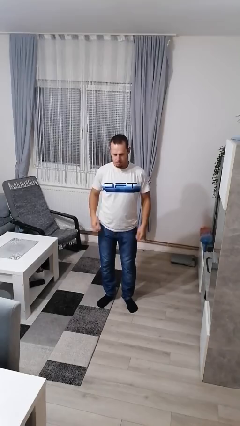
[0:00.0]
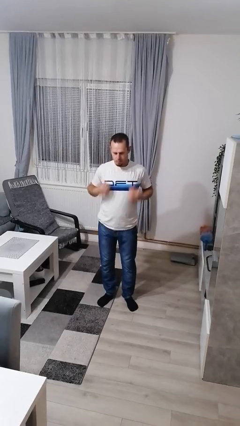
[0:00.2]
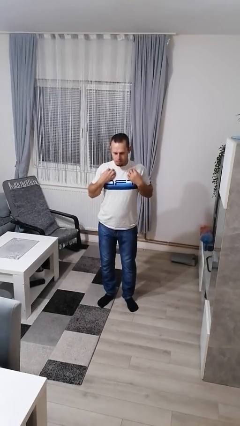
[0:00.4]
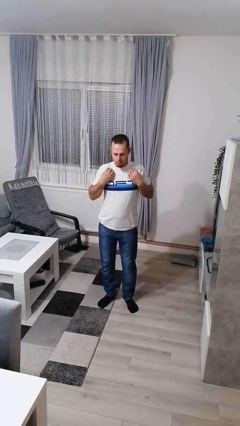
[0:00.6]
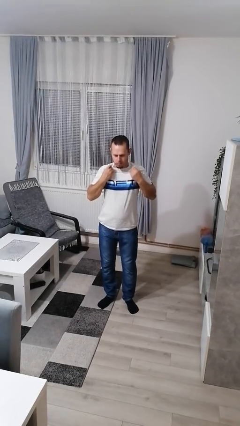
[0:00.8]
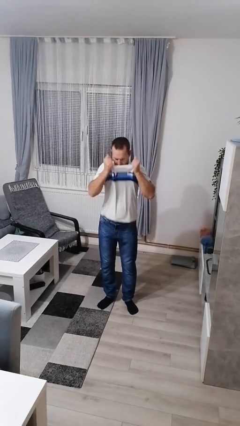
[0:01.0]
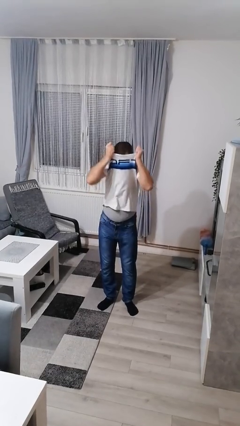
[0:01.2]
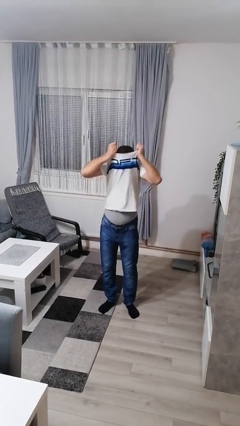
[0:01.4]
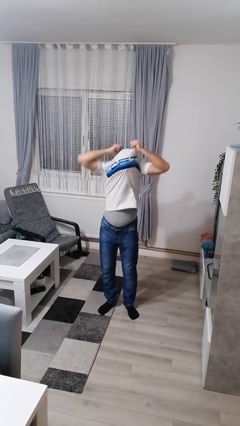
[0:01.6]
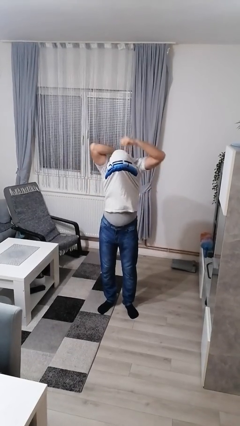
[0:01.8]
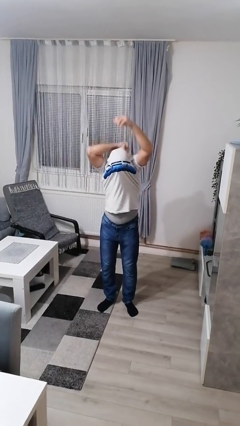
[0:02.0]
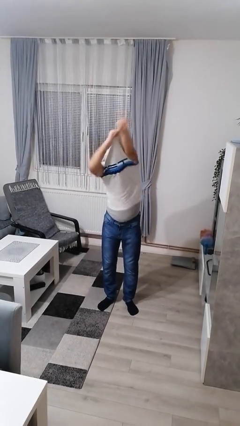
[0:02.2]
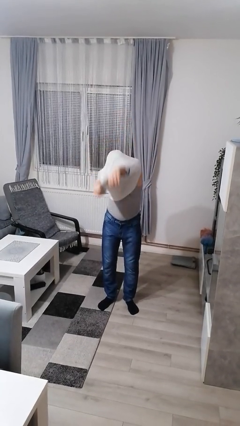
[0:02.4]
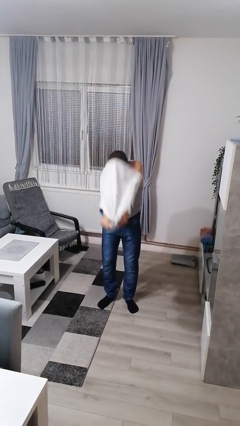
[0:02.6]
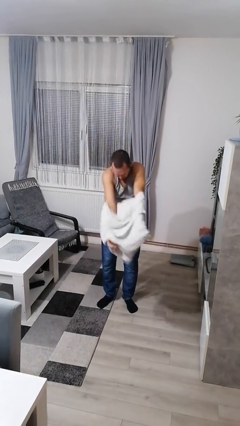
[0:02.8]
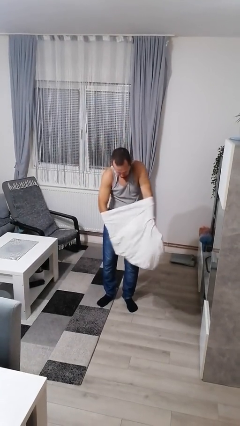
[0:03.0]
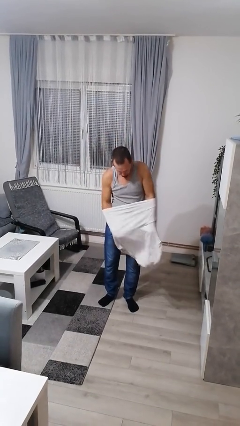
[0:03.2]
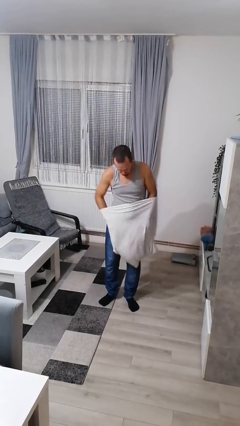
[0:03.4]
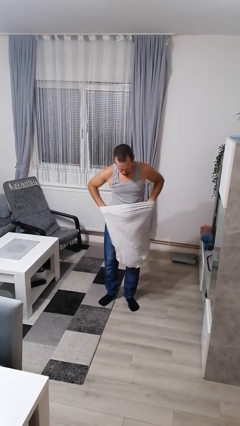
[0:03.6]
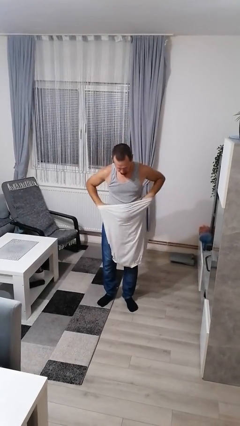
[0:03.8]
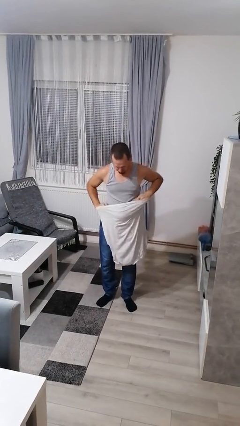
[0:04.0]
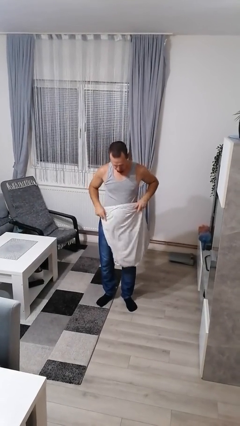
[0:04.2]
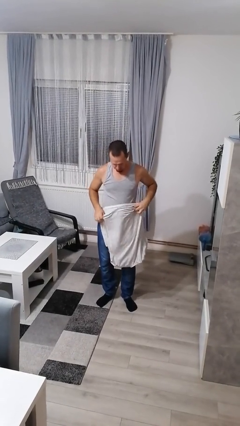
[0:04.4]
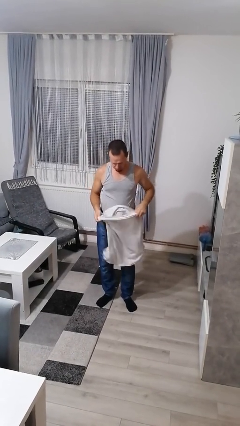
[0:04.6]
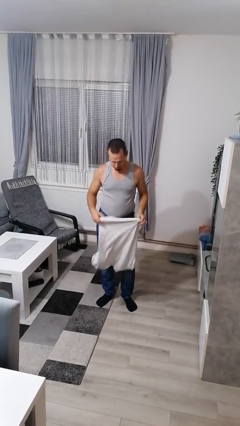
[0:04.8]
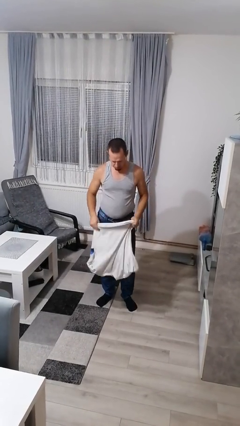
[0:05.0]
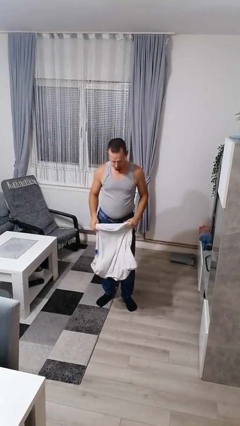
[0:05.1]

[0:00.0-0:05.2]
person takes off shirt

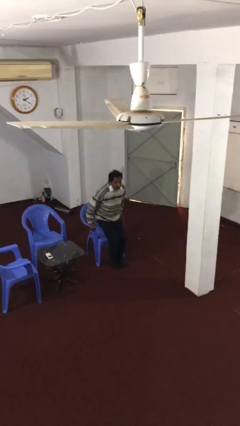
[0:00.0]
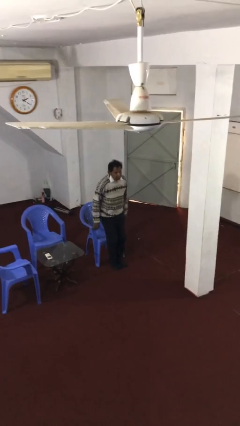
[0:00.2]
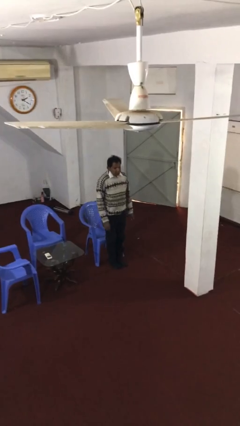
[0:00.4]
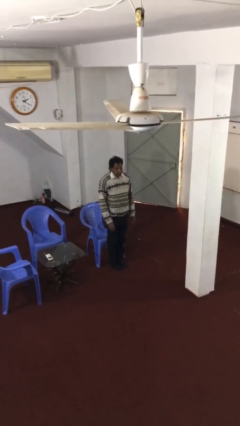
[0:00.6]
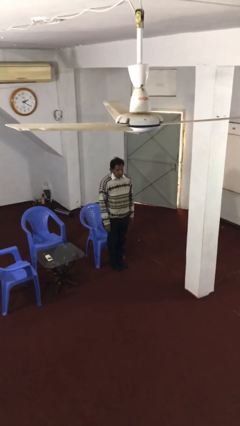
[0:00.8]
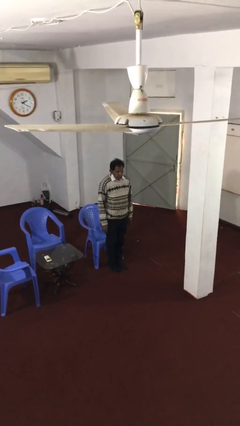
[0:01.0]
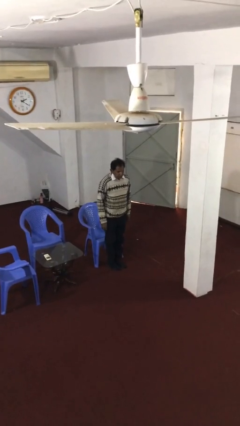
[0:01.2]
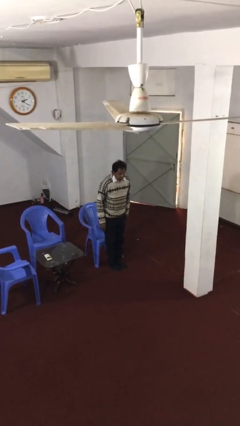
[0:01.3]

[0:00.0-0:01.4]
person stands up

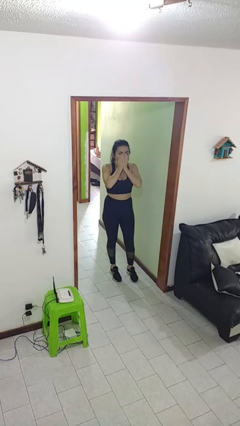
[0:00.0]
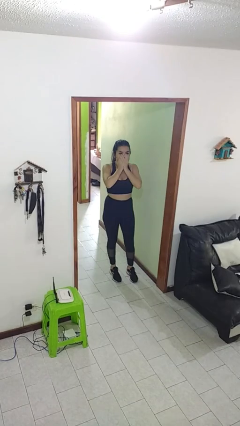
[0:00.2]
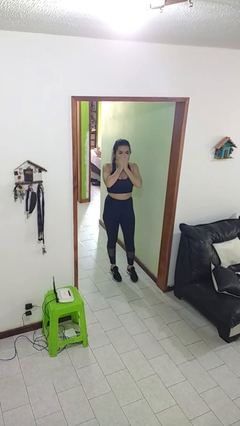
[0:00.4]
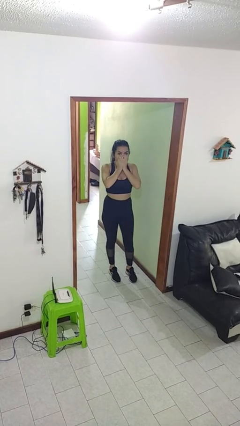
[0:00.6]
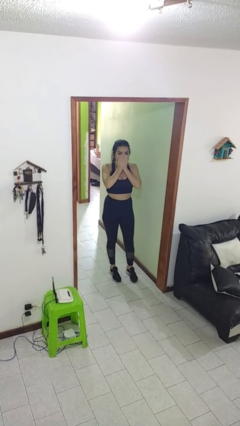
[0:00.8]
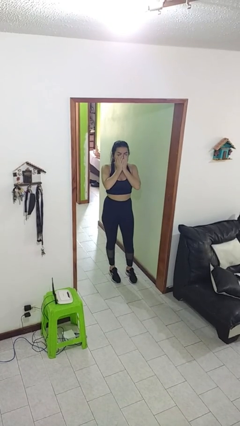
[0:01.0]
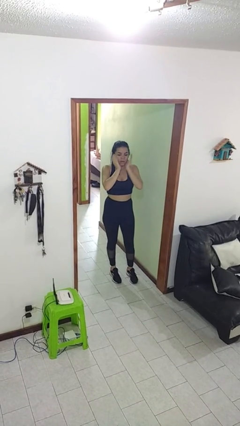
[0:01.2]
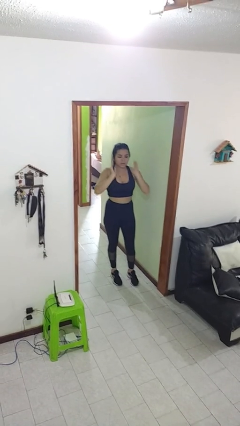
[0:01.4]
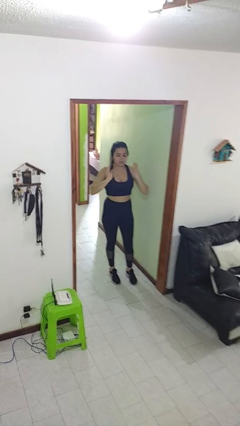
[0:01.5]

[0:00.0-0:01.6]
person covers face with hands

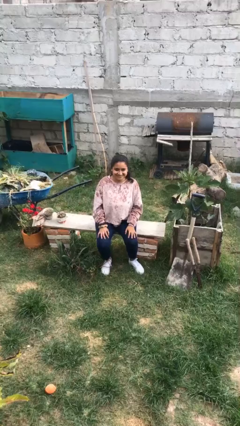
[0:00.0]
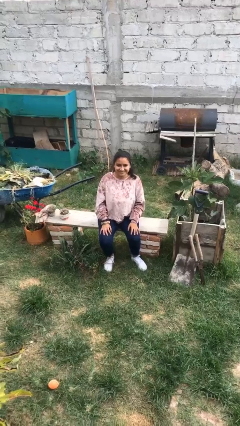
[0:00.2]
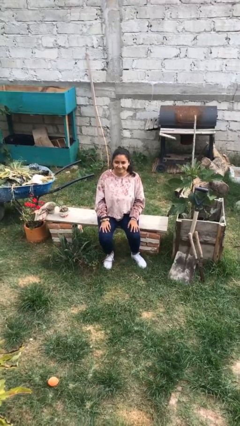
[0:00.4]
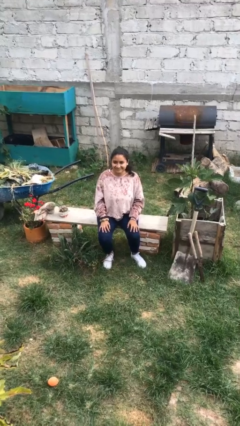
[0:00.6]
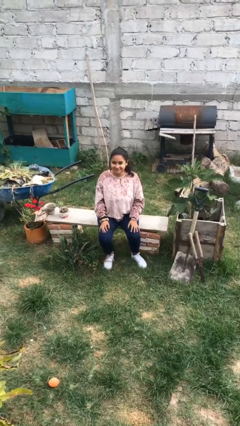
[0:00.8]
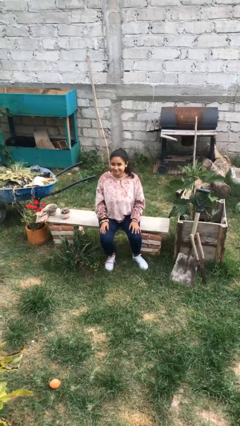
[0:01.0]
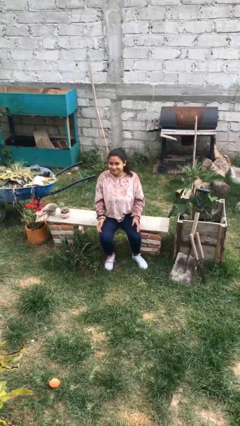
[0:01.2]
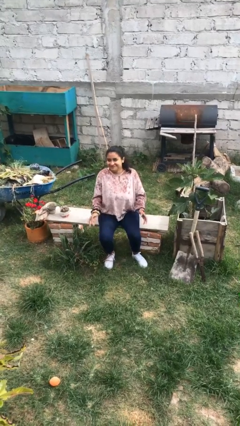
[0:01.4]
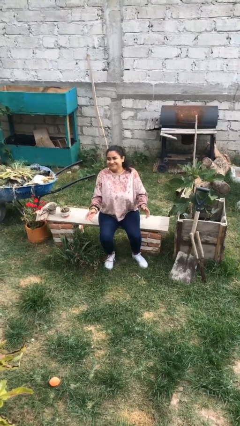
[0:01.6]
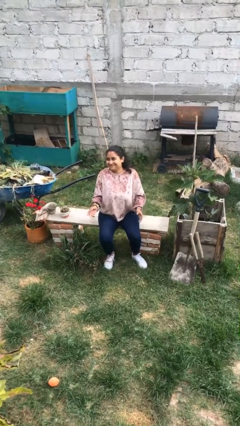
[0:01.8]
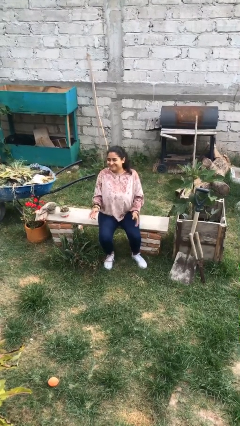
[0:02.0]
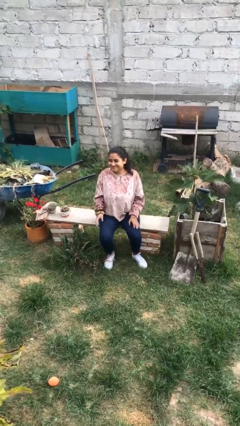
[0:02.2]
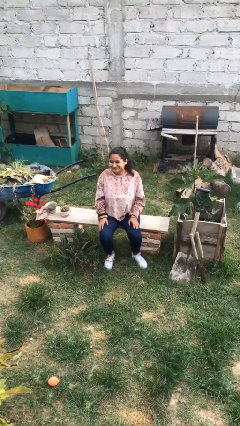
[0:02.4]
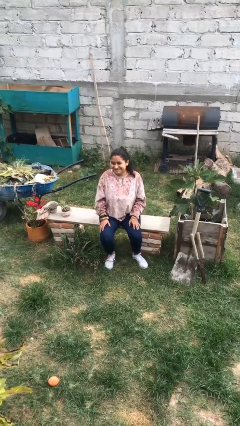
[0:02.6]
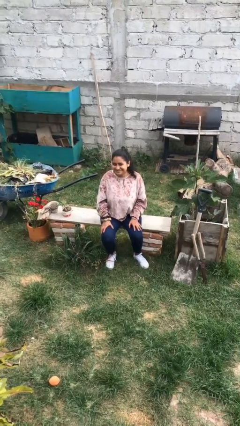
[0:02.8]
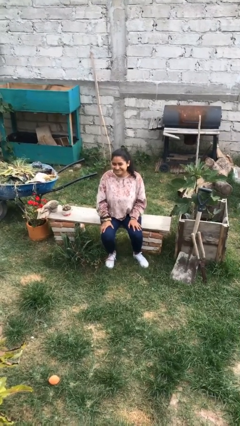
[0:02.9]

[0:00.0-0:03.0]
person shrugs

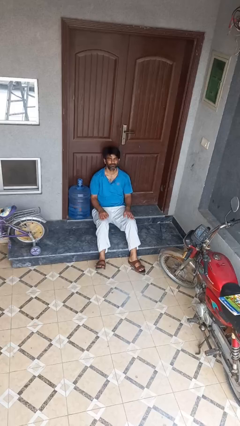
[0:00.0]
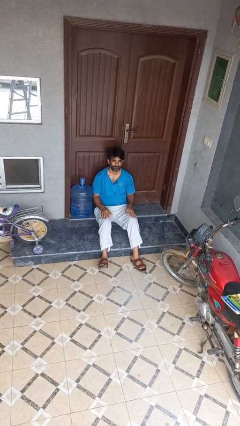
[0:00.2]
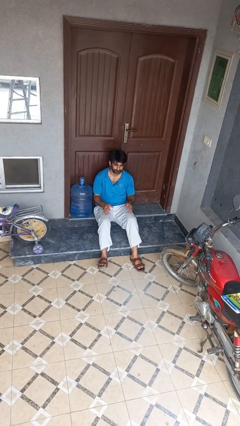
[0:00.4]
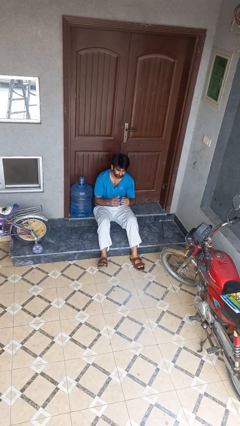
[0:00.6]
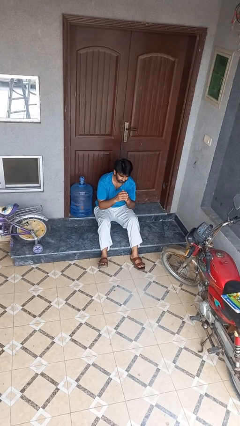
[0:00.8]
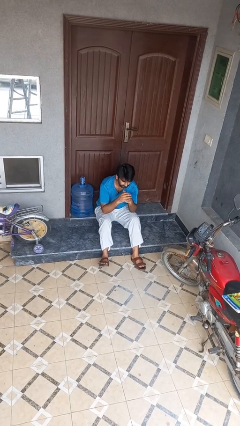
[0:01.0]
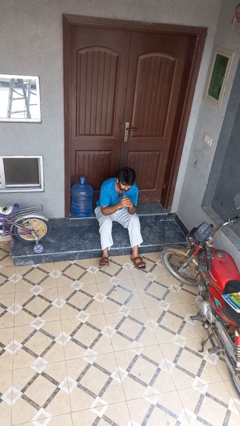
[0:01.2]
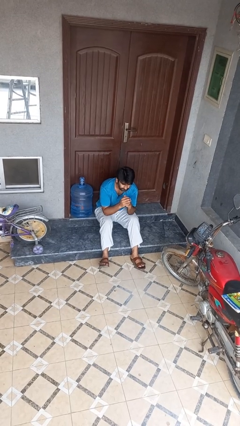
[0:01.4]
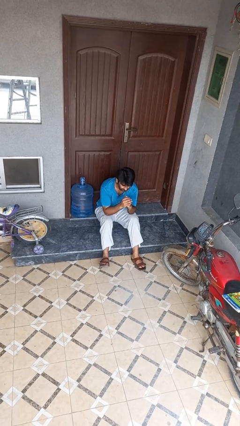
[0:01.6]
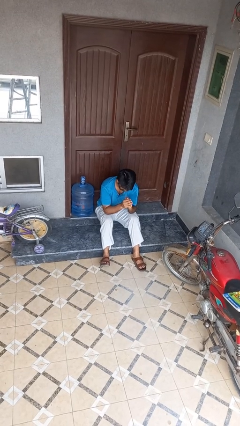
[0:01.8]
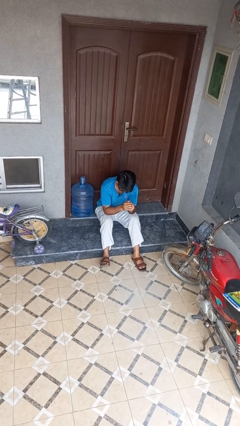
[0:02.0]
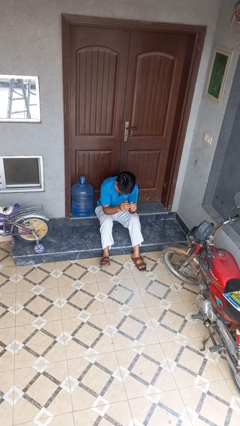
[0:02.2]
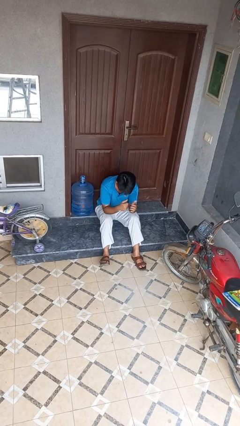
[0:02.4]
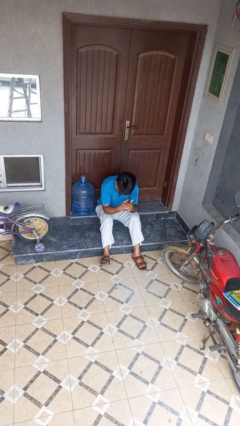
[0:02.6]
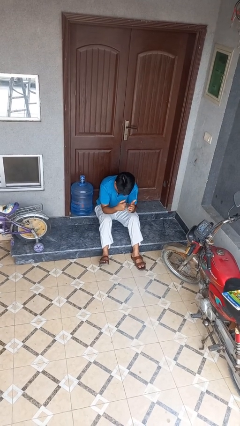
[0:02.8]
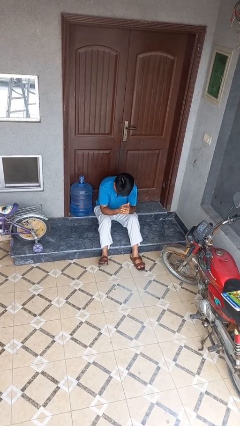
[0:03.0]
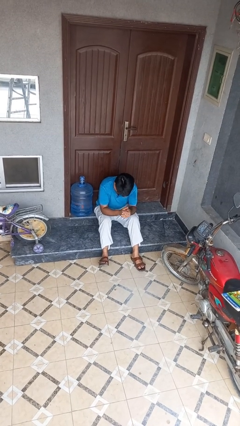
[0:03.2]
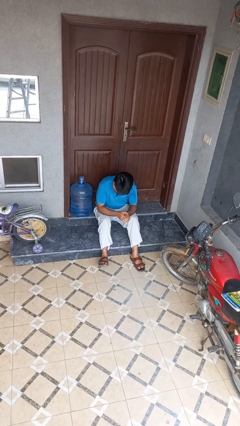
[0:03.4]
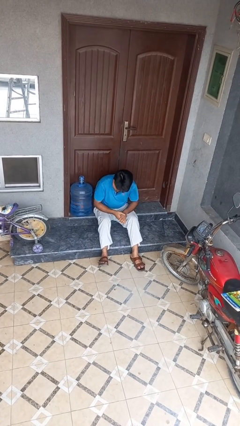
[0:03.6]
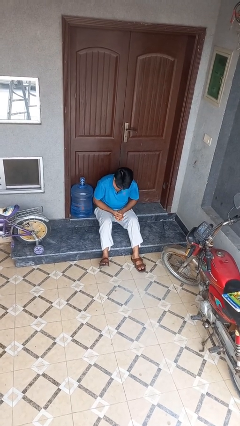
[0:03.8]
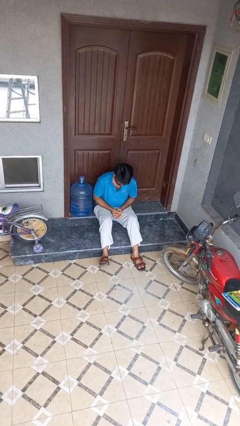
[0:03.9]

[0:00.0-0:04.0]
person looks at hands in lap

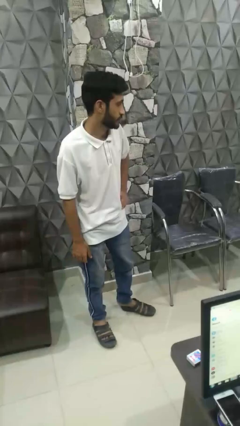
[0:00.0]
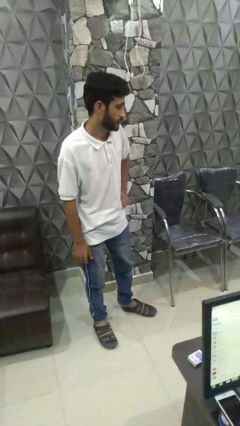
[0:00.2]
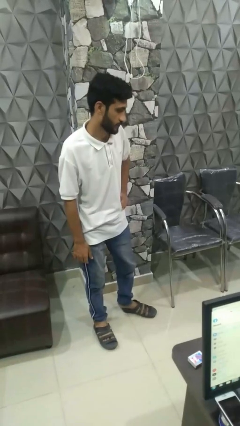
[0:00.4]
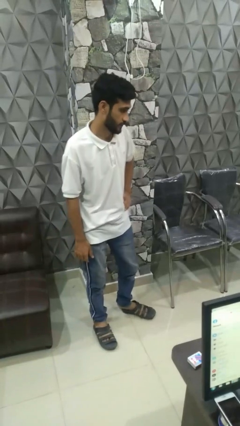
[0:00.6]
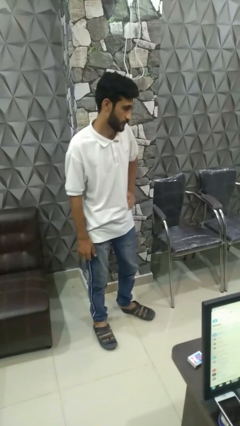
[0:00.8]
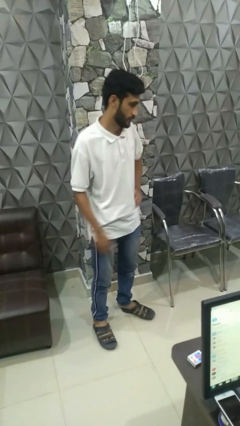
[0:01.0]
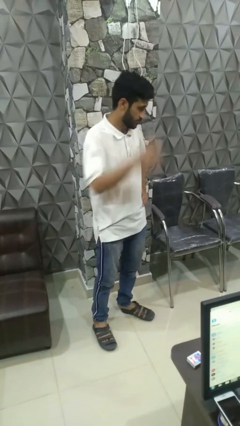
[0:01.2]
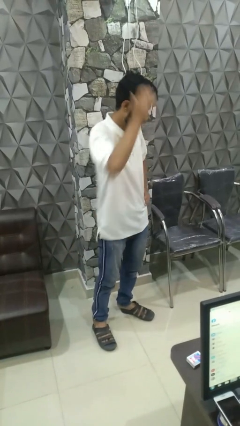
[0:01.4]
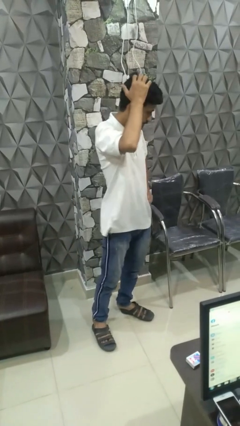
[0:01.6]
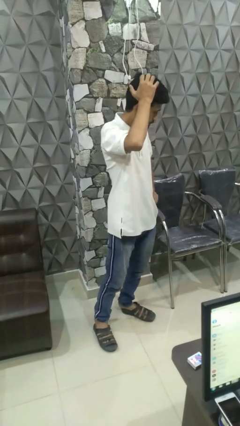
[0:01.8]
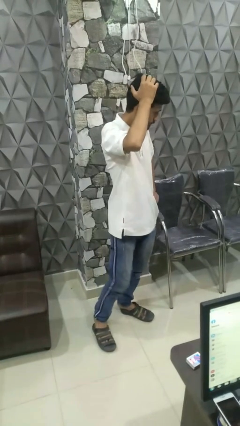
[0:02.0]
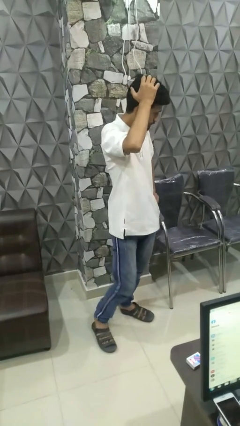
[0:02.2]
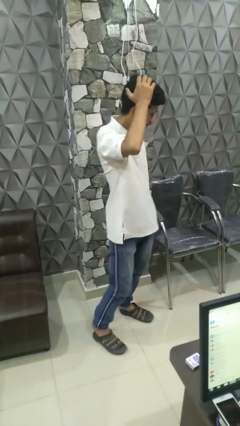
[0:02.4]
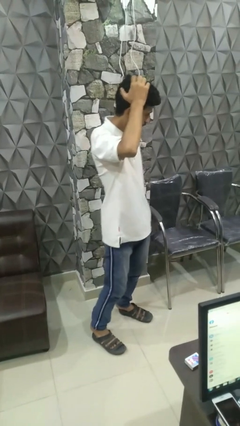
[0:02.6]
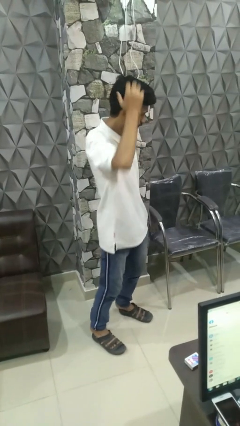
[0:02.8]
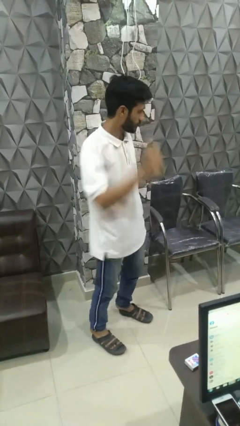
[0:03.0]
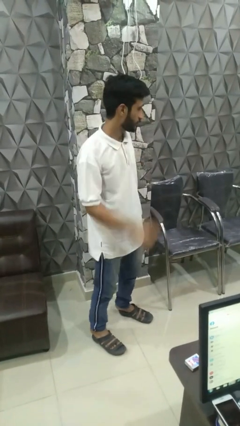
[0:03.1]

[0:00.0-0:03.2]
person scratches face
